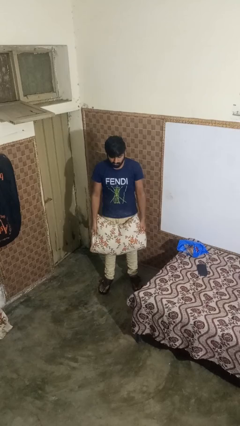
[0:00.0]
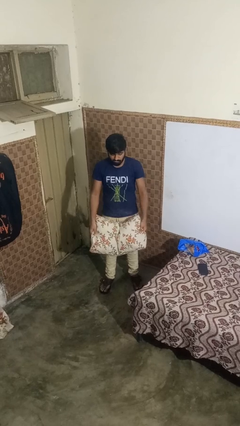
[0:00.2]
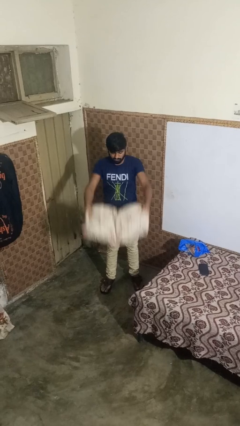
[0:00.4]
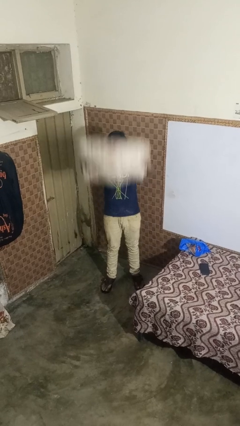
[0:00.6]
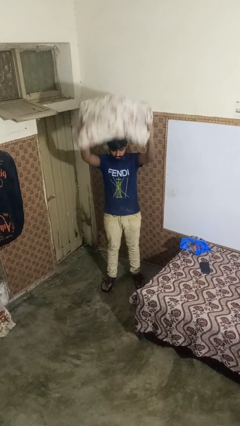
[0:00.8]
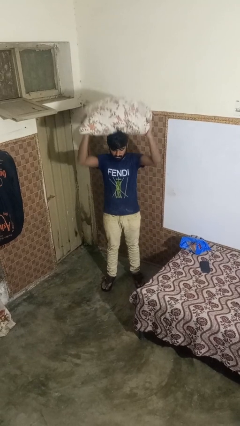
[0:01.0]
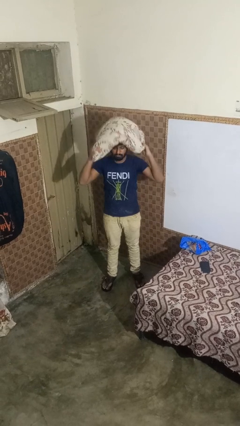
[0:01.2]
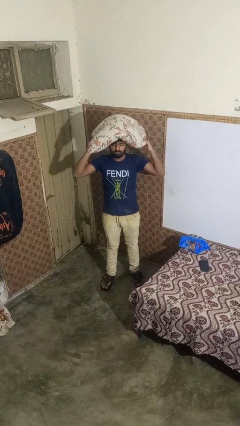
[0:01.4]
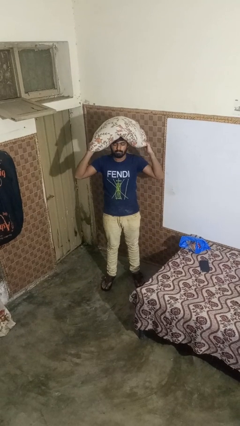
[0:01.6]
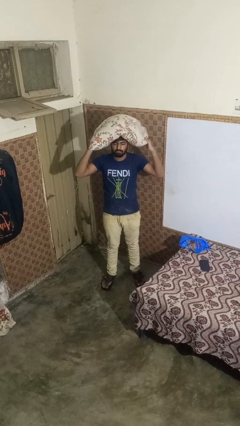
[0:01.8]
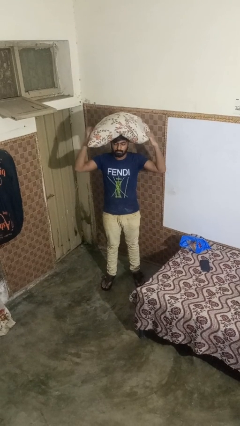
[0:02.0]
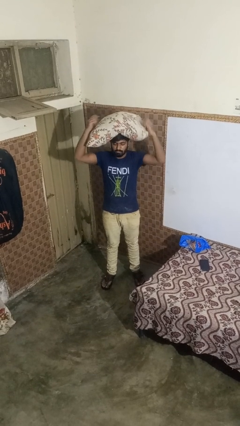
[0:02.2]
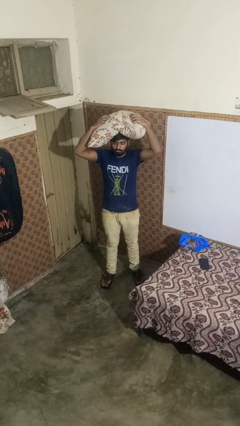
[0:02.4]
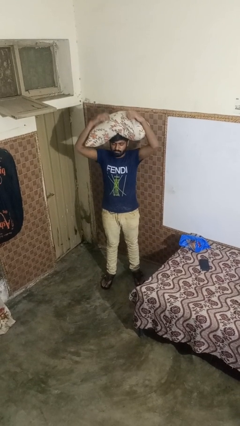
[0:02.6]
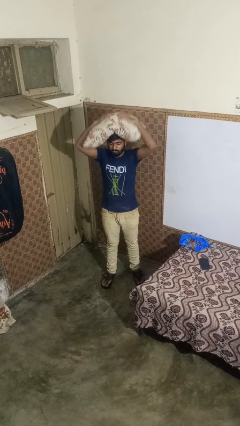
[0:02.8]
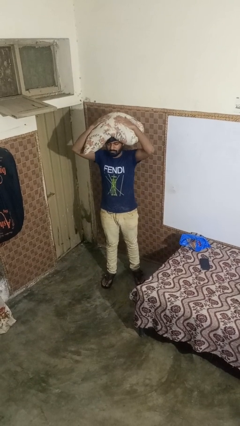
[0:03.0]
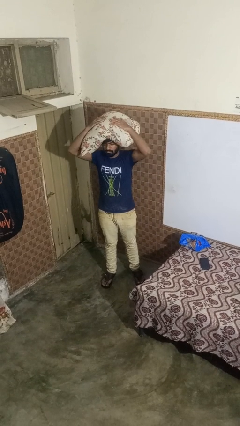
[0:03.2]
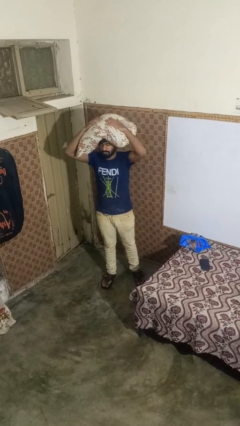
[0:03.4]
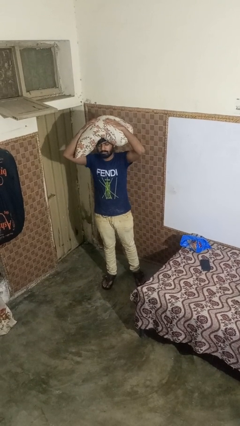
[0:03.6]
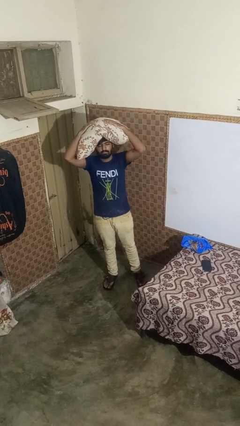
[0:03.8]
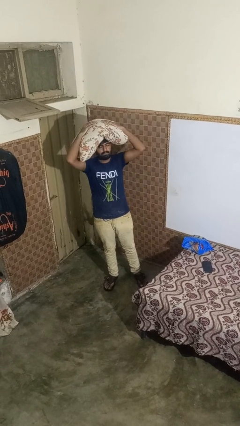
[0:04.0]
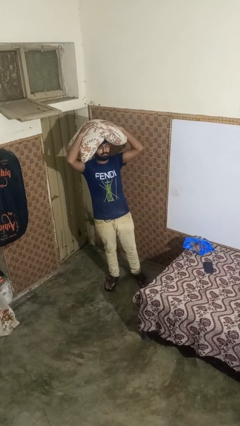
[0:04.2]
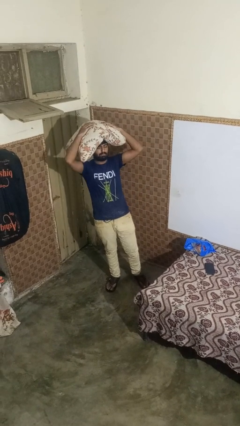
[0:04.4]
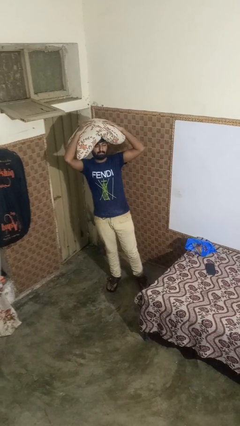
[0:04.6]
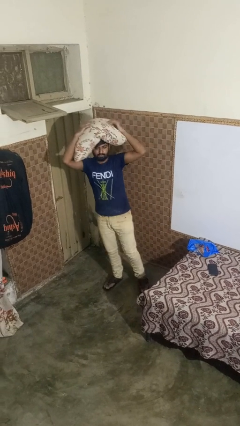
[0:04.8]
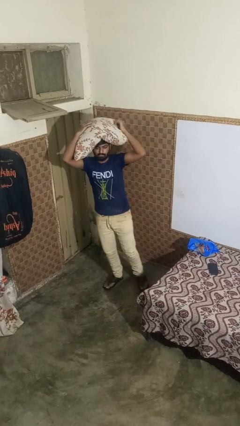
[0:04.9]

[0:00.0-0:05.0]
person holds object above head

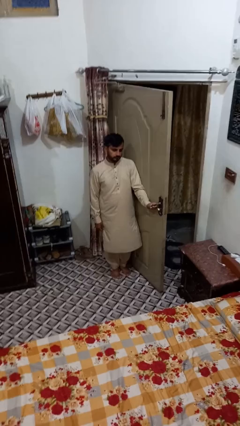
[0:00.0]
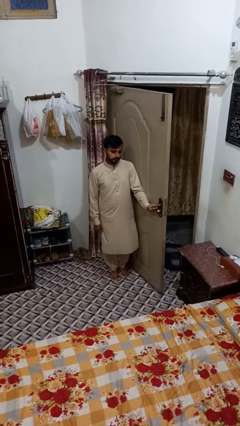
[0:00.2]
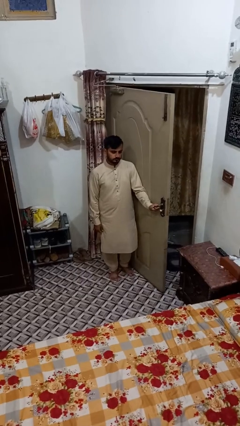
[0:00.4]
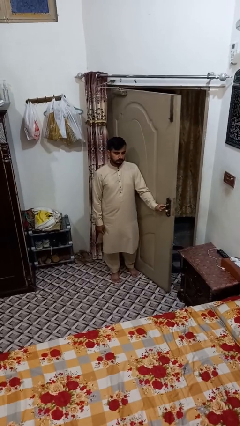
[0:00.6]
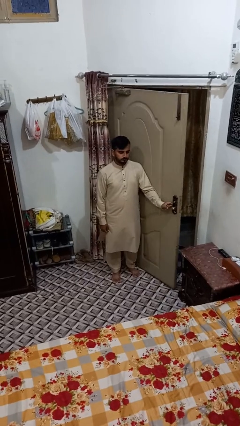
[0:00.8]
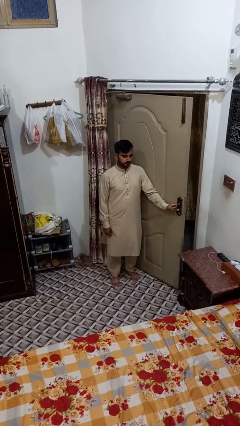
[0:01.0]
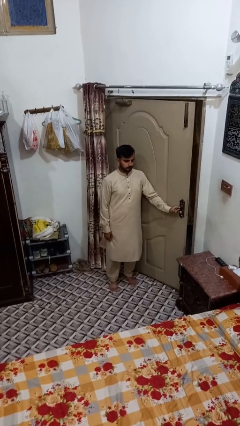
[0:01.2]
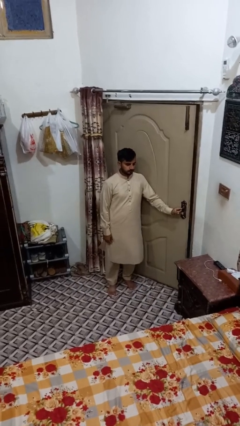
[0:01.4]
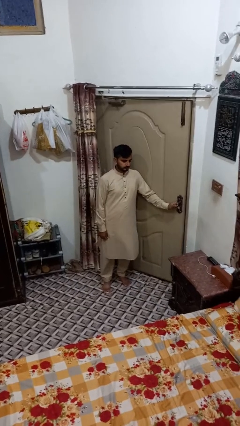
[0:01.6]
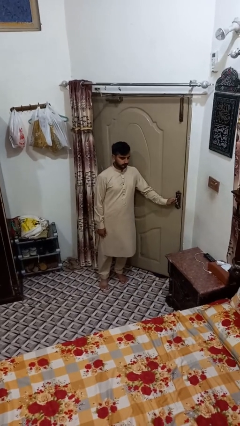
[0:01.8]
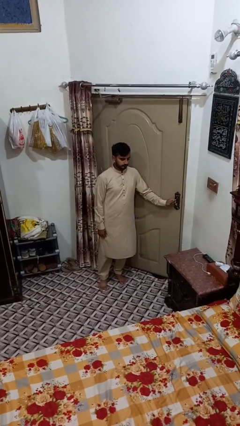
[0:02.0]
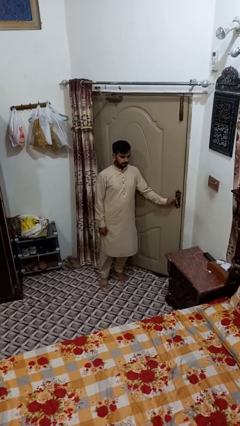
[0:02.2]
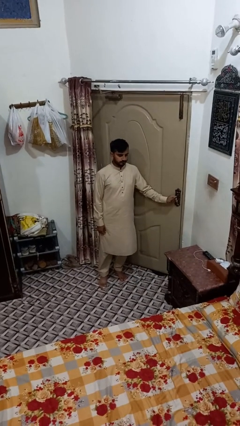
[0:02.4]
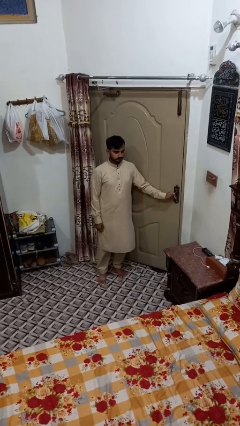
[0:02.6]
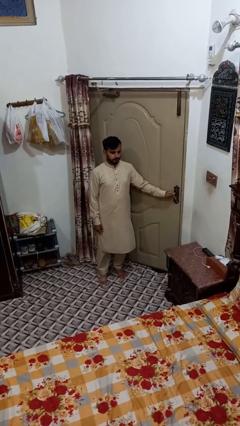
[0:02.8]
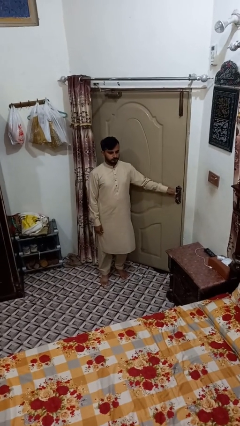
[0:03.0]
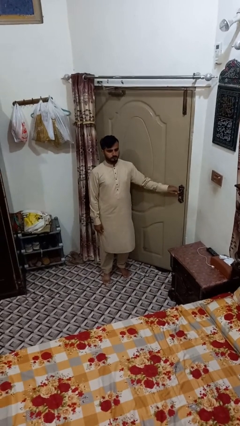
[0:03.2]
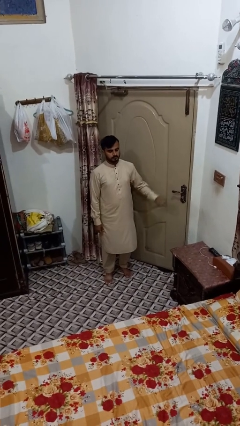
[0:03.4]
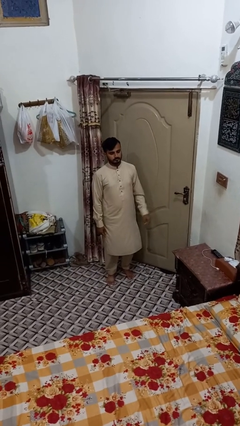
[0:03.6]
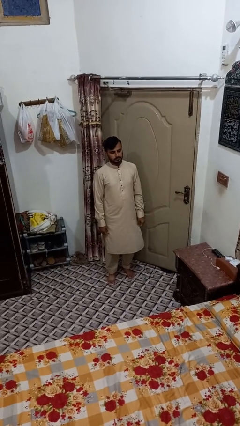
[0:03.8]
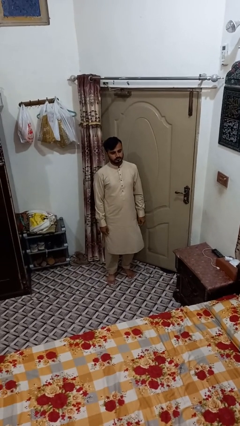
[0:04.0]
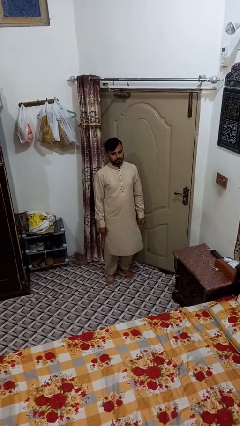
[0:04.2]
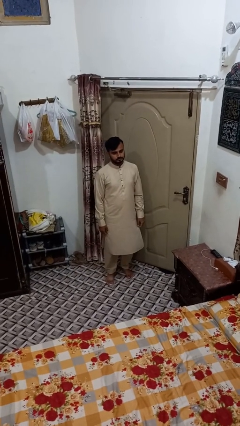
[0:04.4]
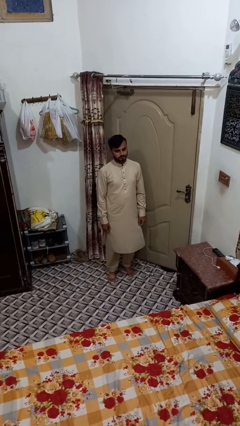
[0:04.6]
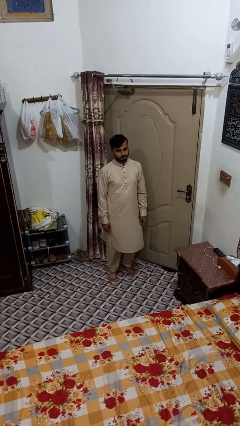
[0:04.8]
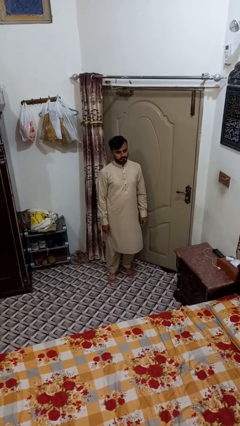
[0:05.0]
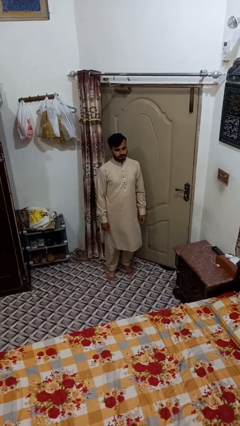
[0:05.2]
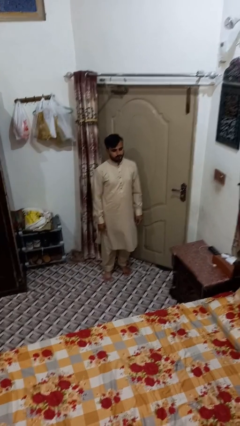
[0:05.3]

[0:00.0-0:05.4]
person closes closet door

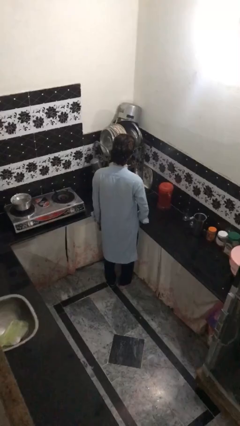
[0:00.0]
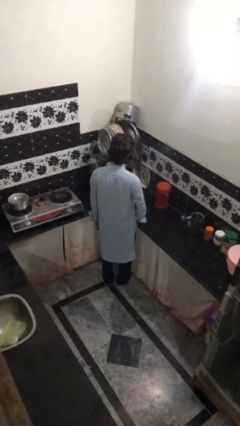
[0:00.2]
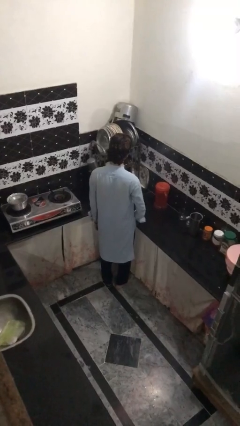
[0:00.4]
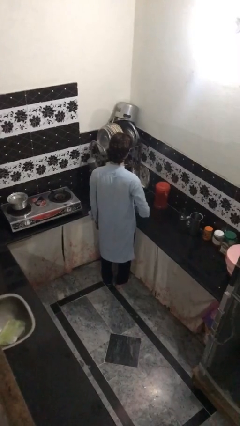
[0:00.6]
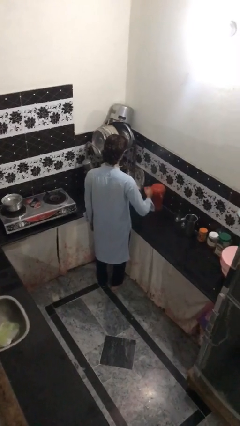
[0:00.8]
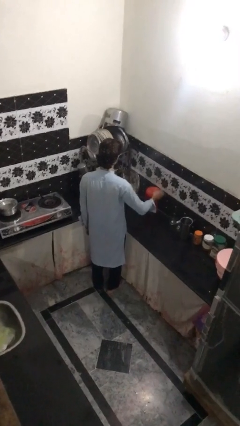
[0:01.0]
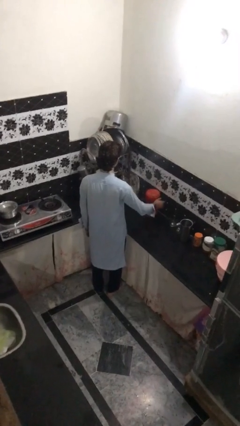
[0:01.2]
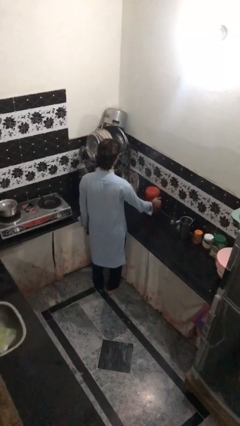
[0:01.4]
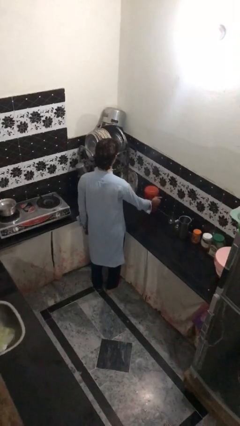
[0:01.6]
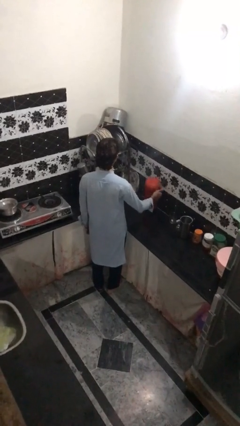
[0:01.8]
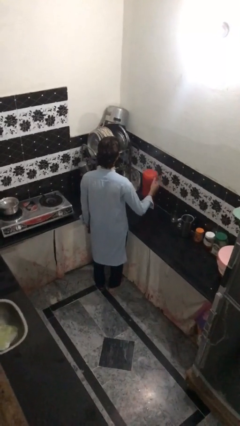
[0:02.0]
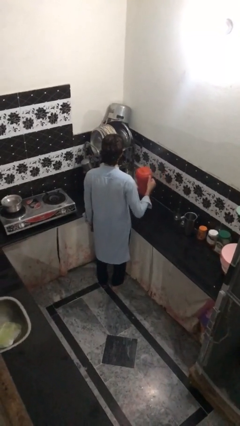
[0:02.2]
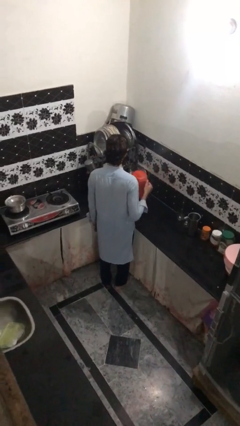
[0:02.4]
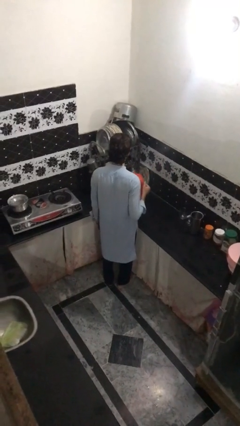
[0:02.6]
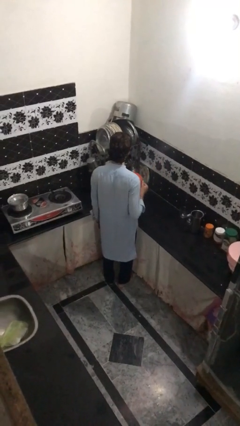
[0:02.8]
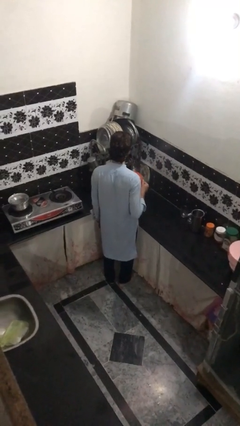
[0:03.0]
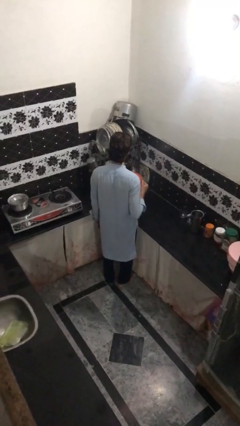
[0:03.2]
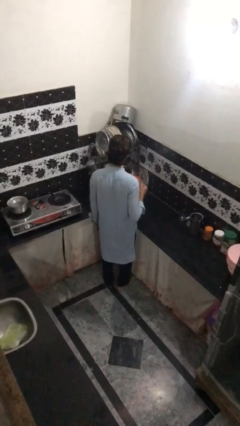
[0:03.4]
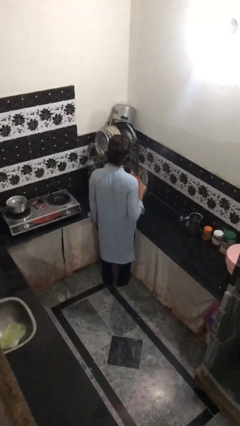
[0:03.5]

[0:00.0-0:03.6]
person picks up object from countertop

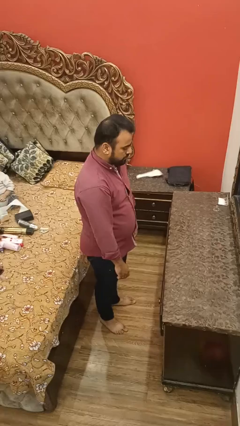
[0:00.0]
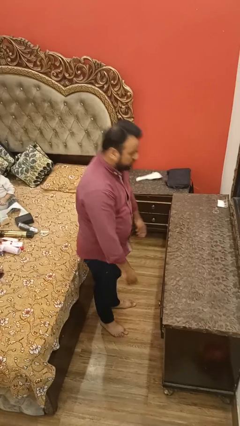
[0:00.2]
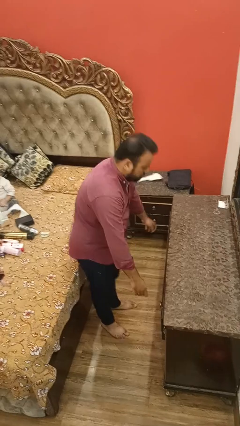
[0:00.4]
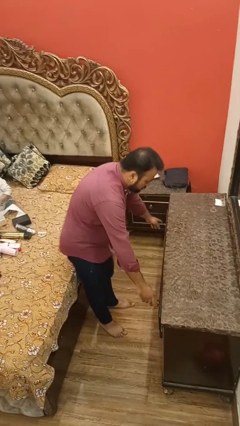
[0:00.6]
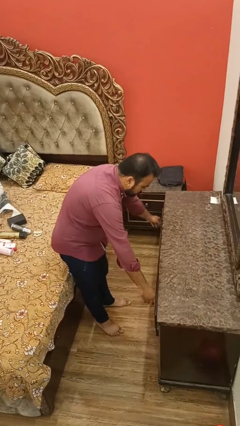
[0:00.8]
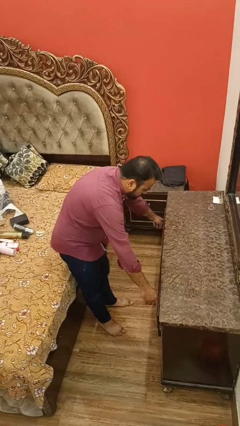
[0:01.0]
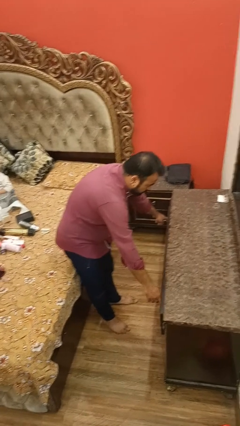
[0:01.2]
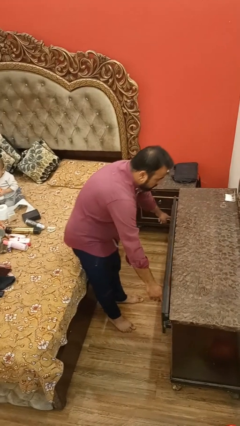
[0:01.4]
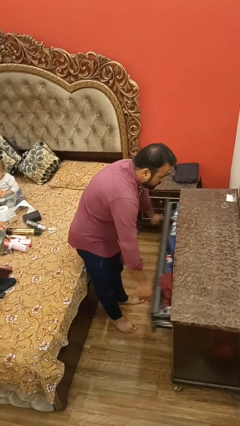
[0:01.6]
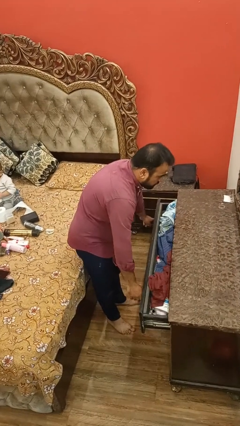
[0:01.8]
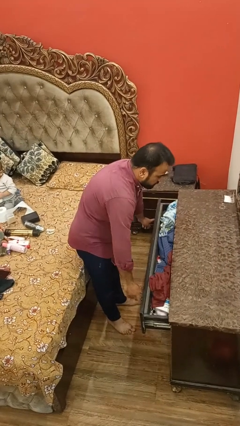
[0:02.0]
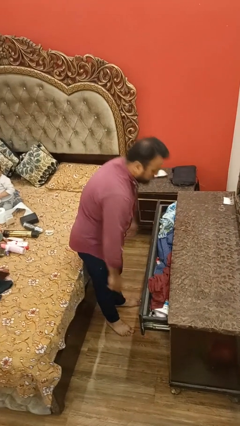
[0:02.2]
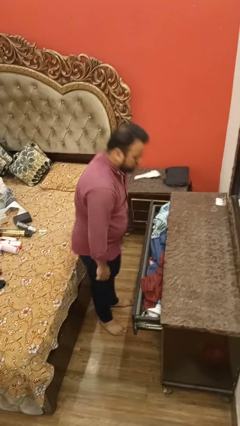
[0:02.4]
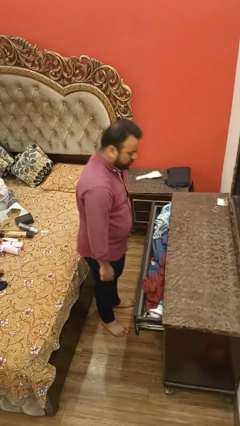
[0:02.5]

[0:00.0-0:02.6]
person opens dresser drawer

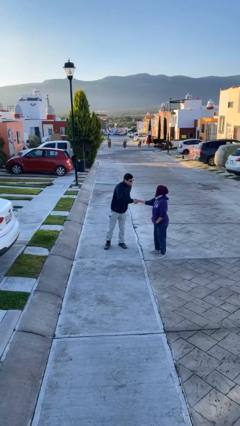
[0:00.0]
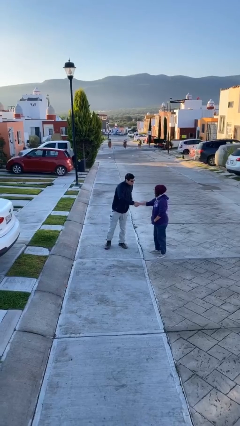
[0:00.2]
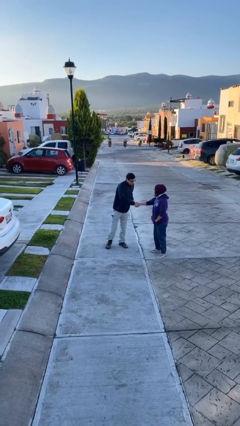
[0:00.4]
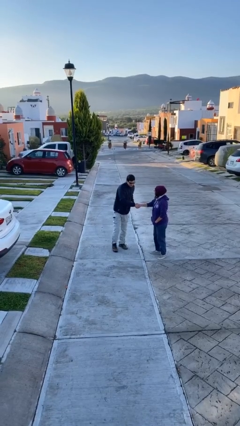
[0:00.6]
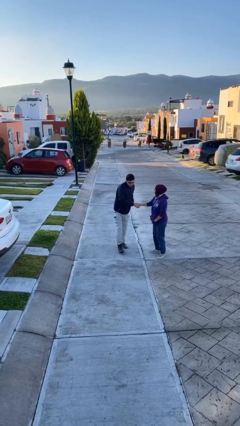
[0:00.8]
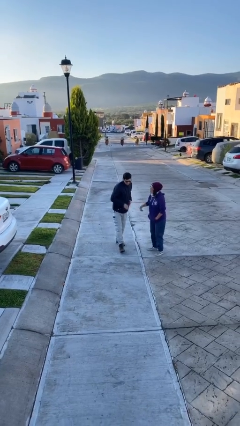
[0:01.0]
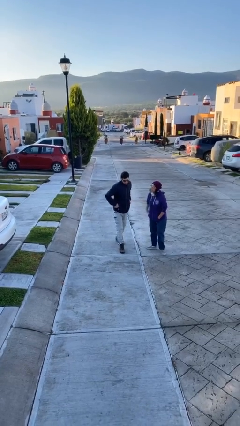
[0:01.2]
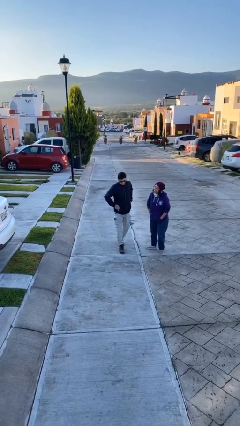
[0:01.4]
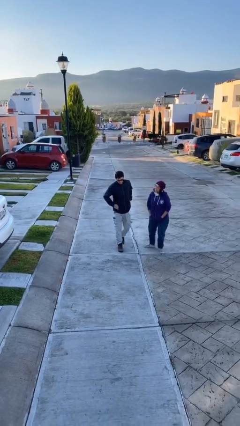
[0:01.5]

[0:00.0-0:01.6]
person shakes hand
